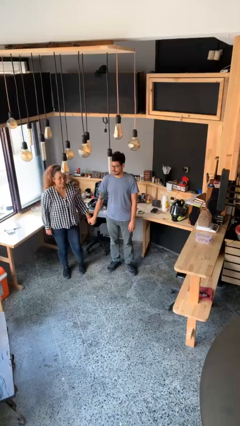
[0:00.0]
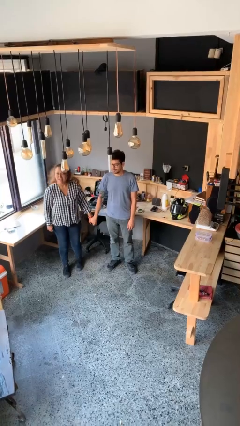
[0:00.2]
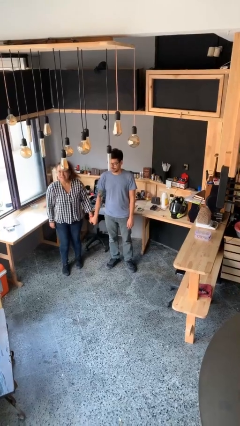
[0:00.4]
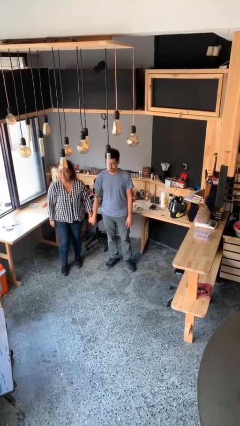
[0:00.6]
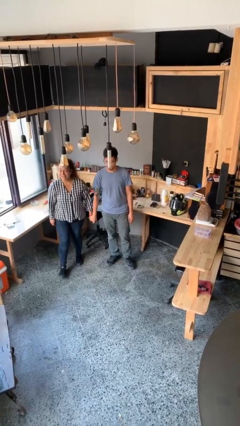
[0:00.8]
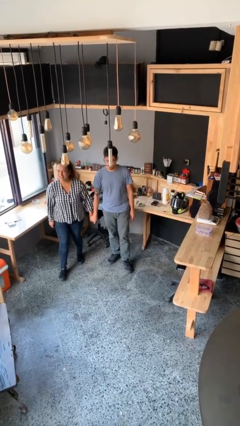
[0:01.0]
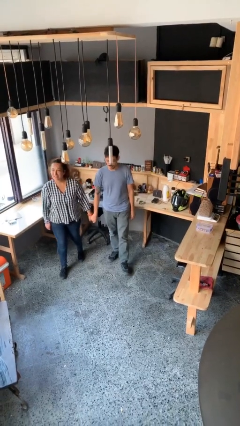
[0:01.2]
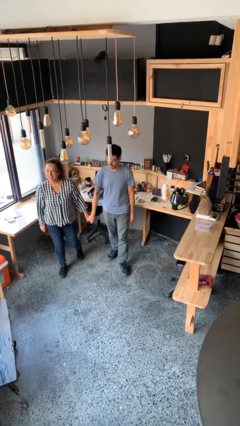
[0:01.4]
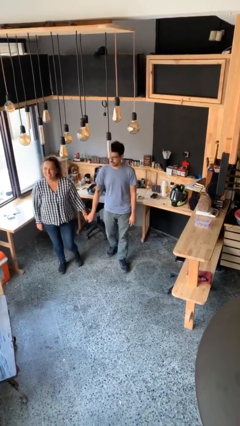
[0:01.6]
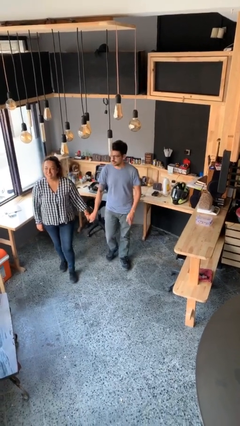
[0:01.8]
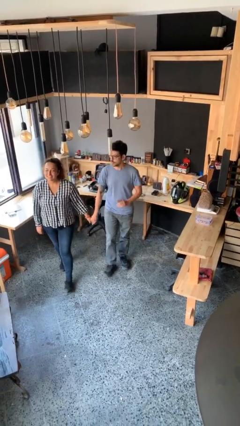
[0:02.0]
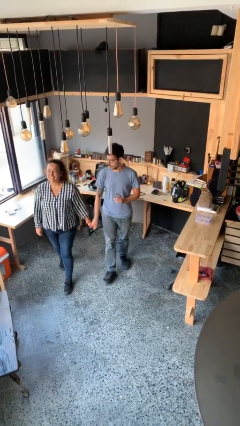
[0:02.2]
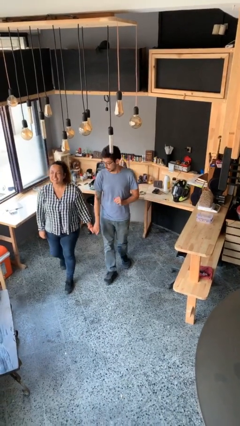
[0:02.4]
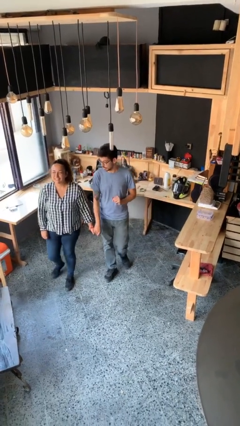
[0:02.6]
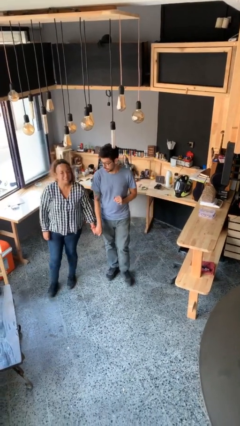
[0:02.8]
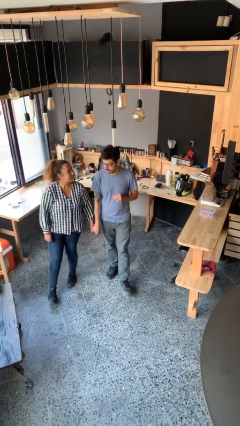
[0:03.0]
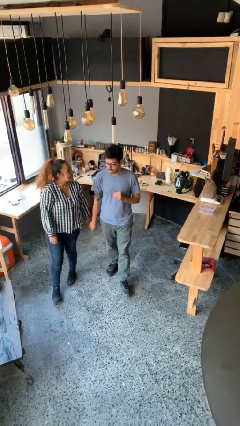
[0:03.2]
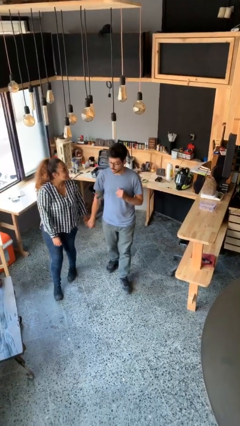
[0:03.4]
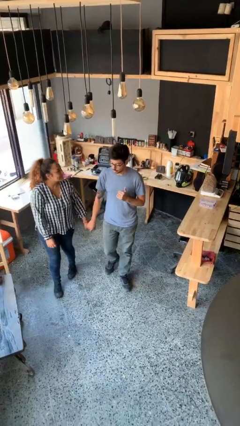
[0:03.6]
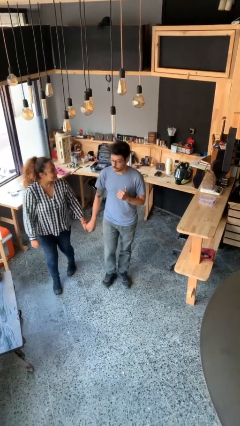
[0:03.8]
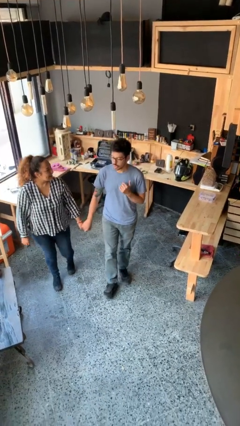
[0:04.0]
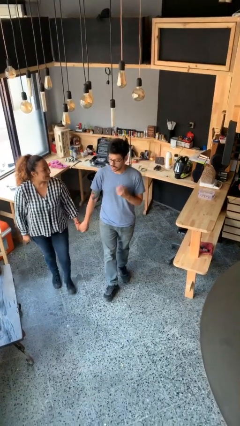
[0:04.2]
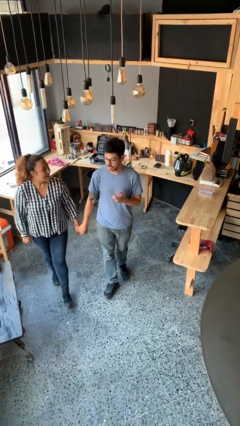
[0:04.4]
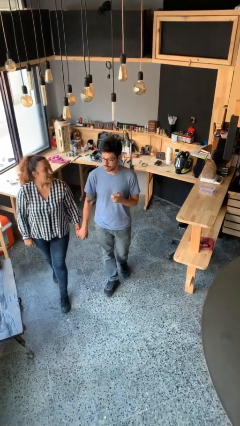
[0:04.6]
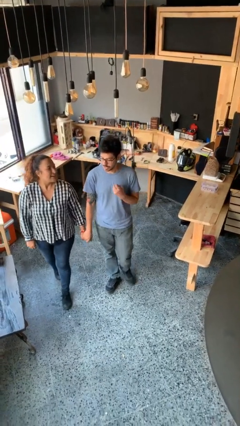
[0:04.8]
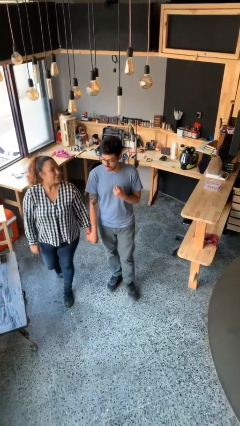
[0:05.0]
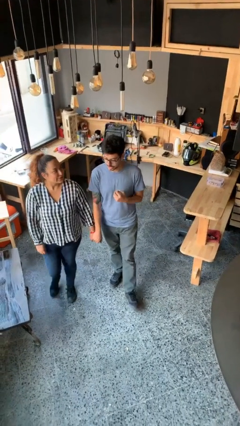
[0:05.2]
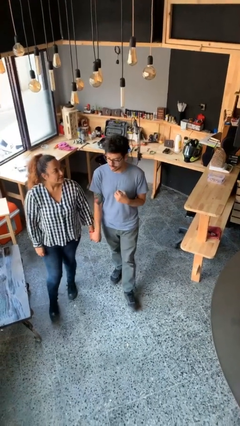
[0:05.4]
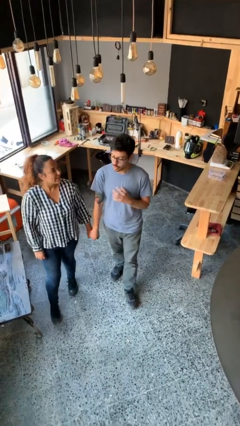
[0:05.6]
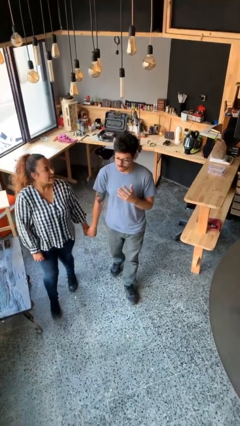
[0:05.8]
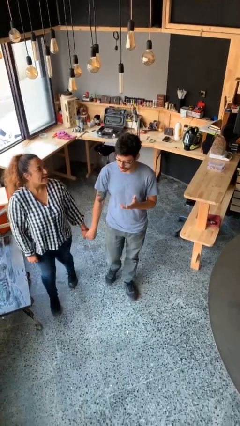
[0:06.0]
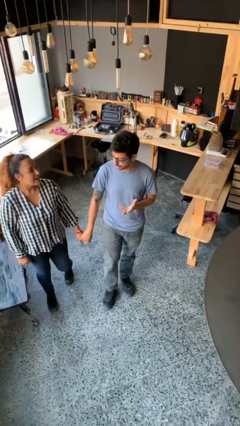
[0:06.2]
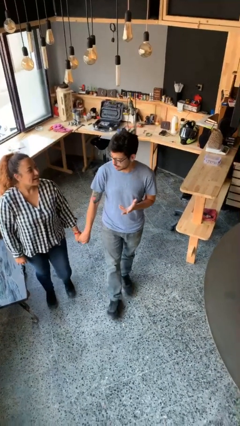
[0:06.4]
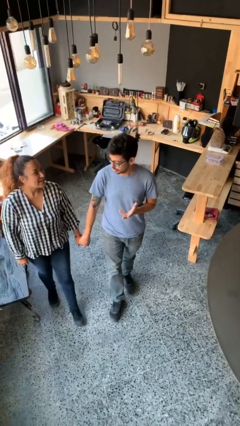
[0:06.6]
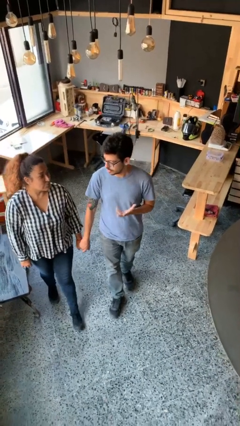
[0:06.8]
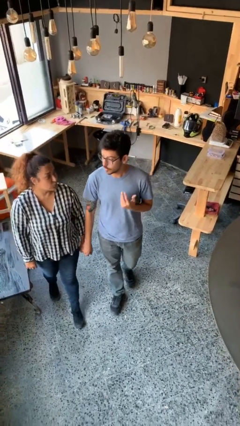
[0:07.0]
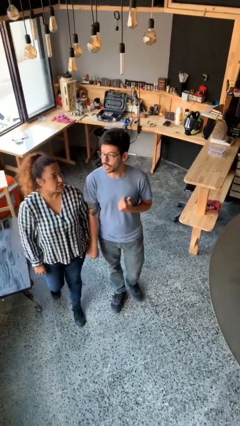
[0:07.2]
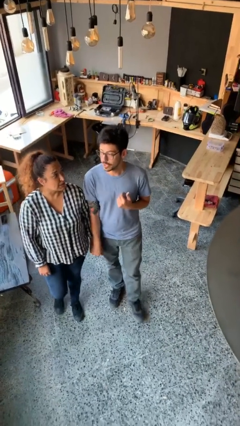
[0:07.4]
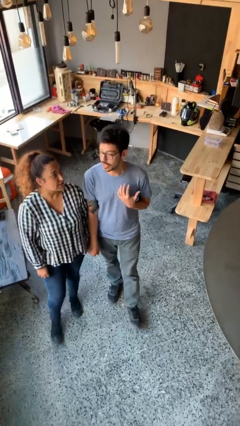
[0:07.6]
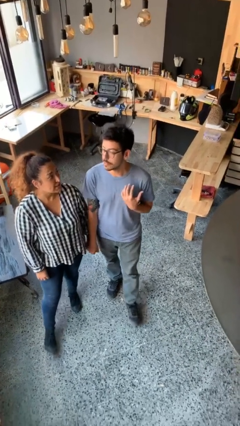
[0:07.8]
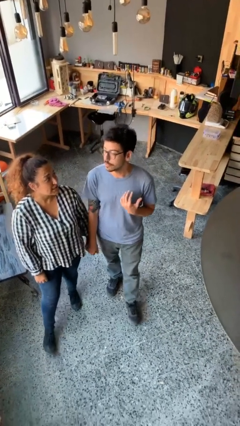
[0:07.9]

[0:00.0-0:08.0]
person holds hand

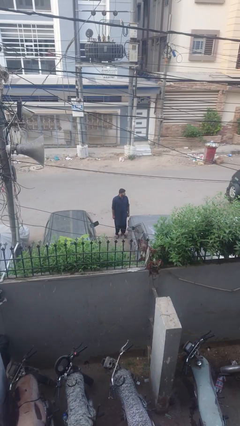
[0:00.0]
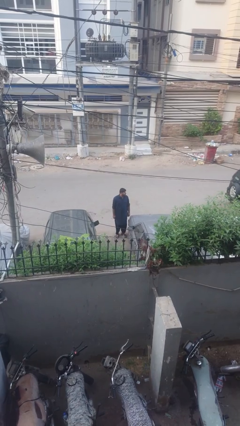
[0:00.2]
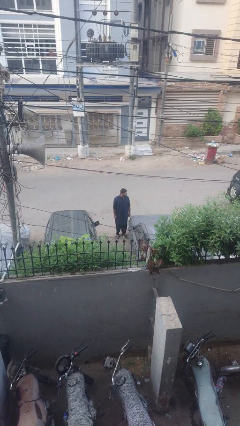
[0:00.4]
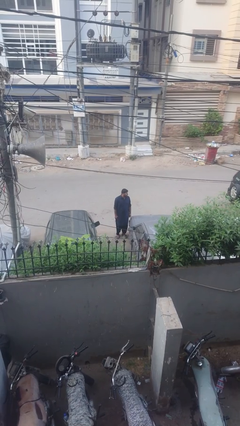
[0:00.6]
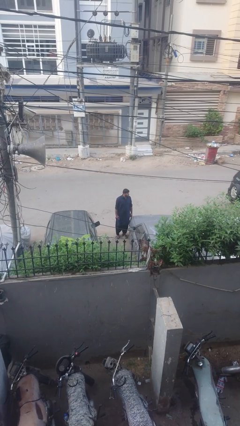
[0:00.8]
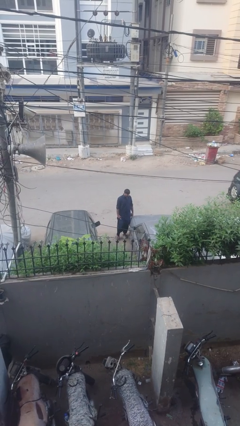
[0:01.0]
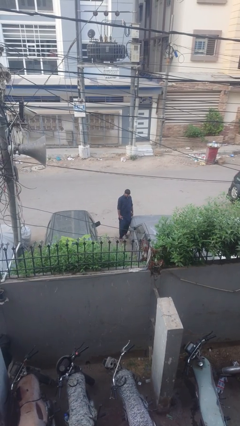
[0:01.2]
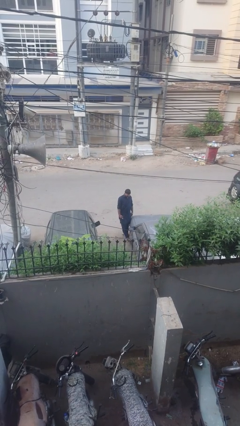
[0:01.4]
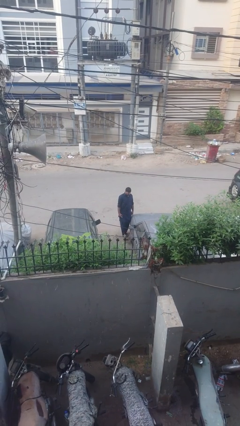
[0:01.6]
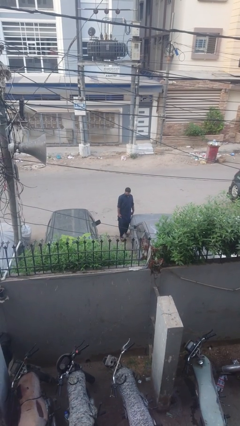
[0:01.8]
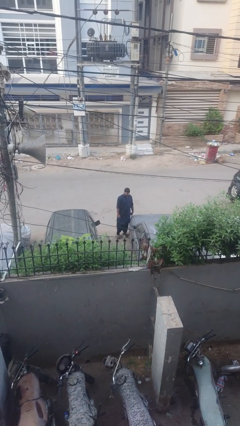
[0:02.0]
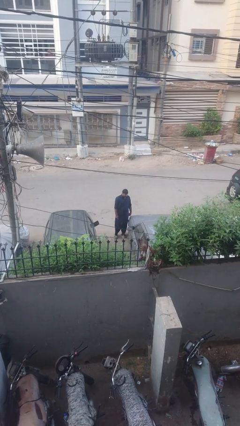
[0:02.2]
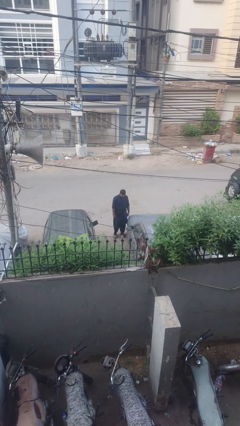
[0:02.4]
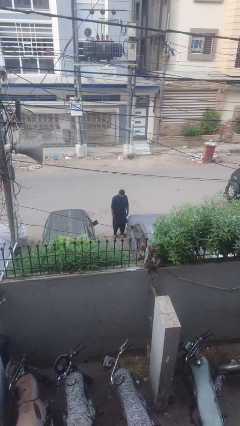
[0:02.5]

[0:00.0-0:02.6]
person kicks car tires

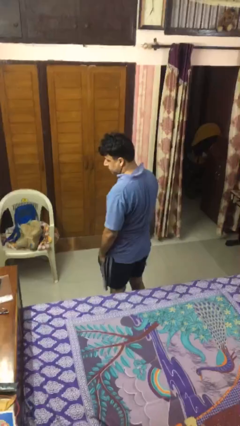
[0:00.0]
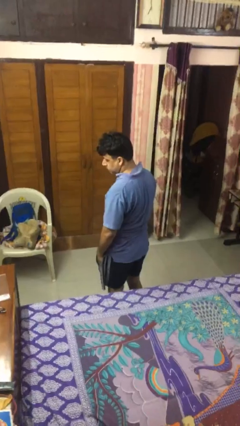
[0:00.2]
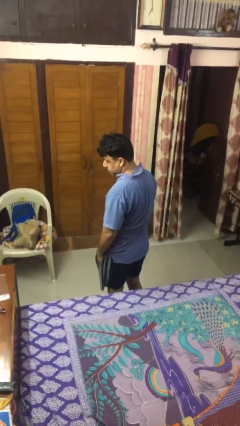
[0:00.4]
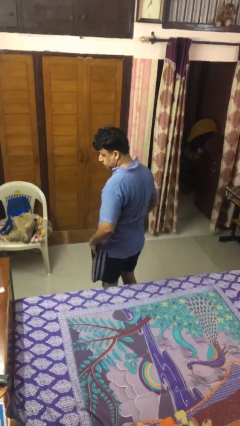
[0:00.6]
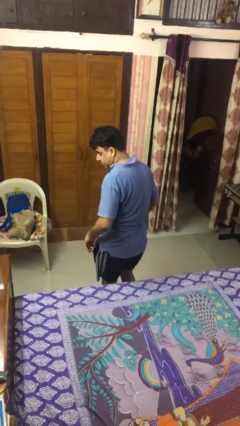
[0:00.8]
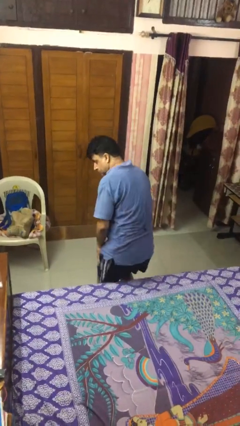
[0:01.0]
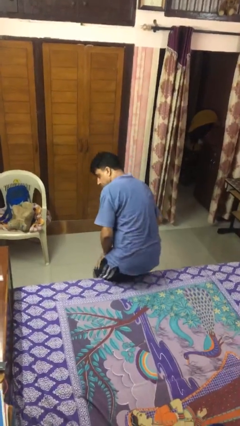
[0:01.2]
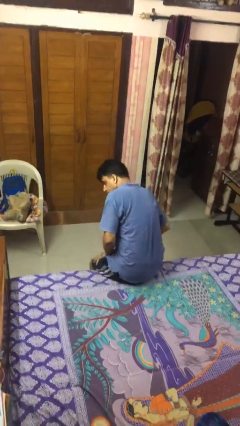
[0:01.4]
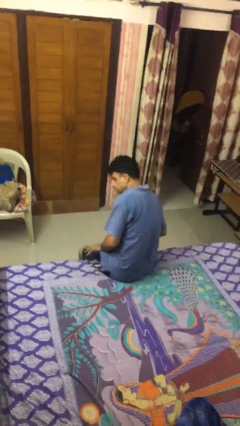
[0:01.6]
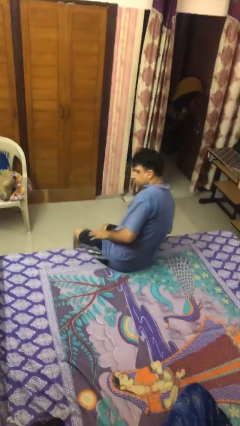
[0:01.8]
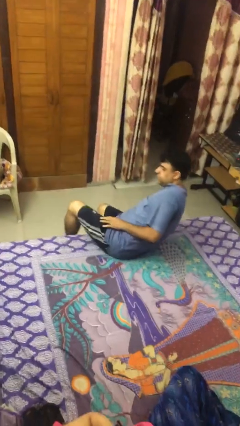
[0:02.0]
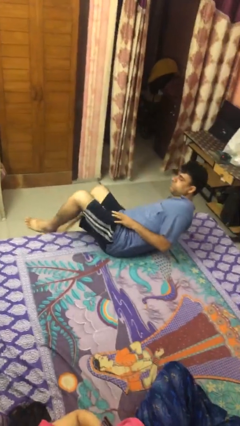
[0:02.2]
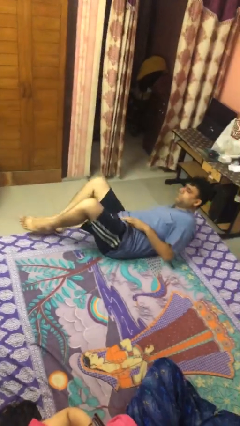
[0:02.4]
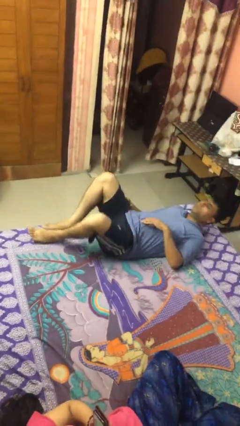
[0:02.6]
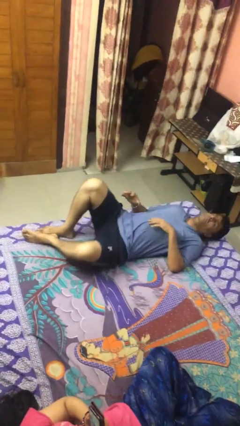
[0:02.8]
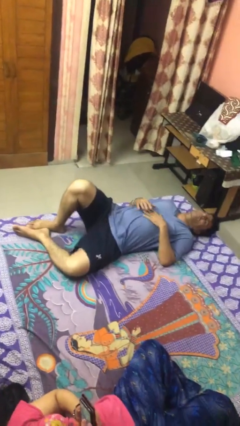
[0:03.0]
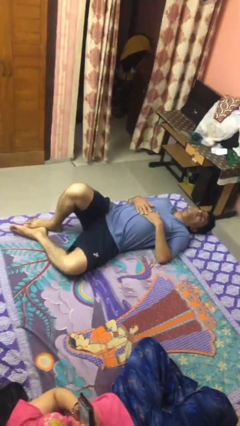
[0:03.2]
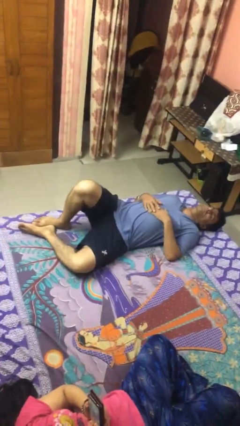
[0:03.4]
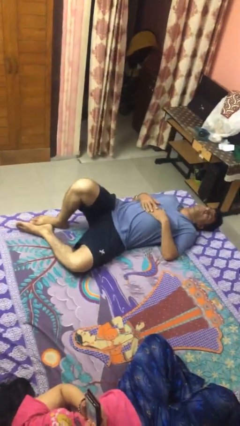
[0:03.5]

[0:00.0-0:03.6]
person lies down on bed

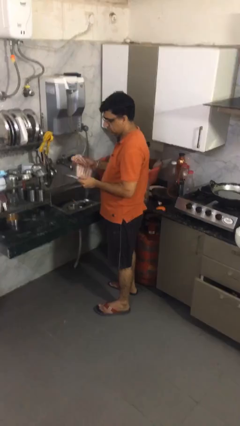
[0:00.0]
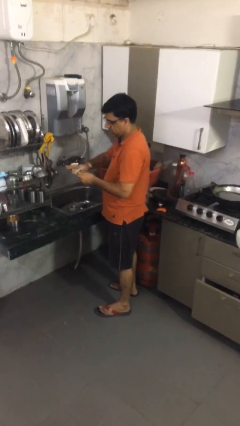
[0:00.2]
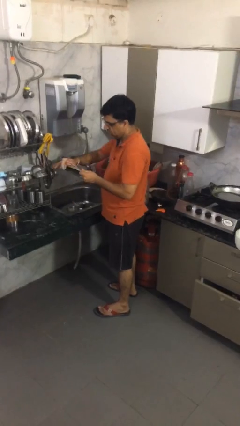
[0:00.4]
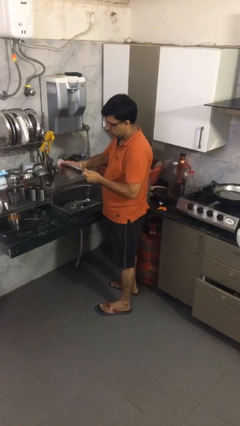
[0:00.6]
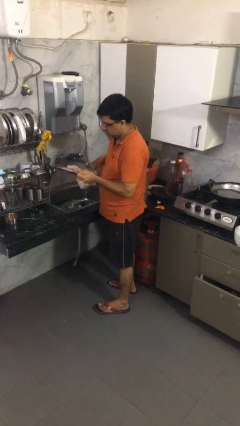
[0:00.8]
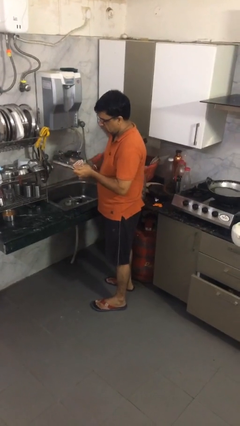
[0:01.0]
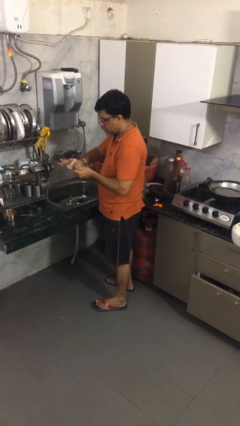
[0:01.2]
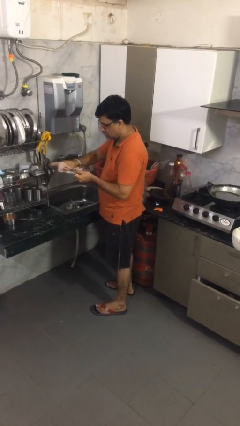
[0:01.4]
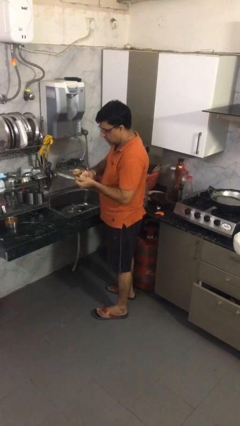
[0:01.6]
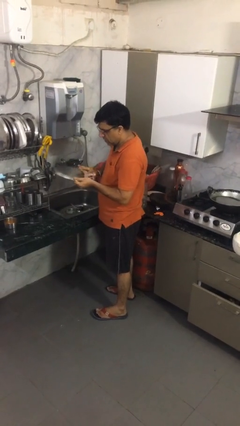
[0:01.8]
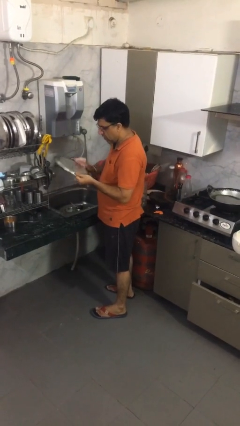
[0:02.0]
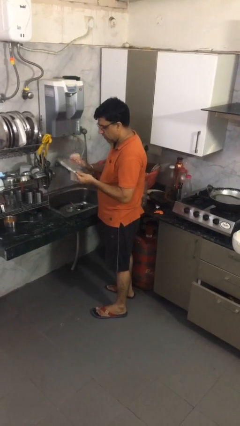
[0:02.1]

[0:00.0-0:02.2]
person dries dish

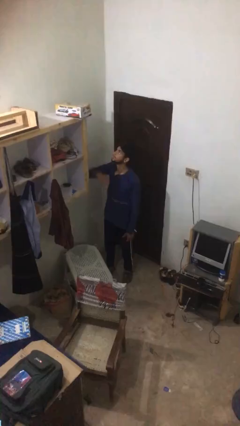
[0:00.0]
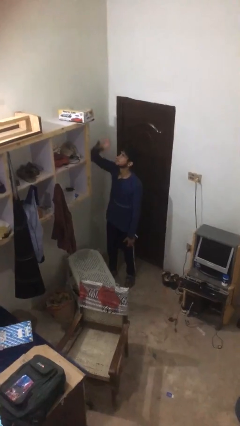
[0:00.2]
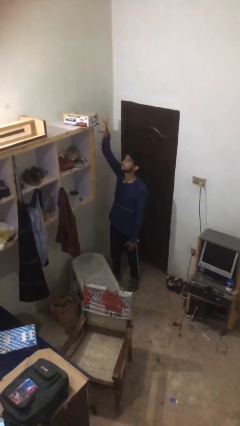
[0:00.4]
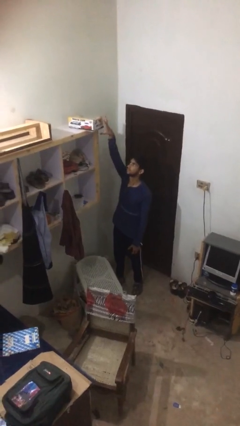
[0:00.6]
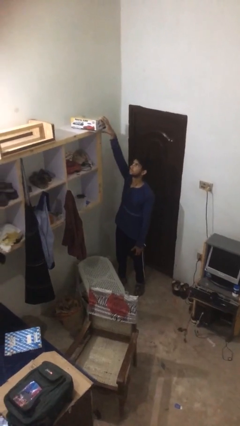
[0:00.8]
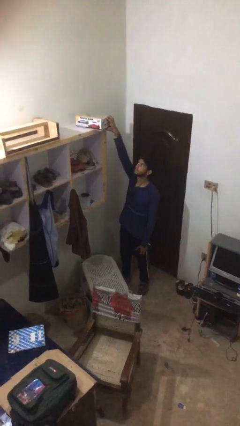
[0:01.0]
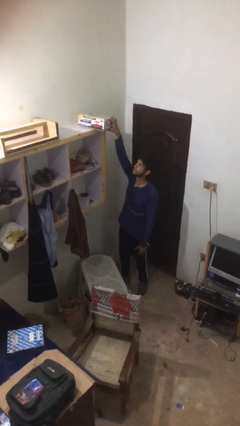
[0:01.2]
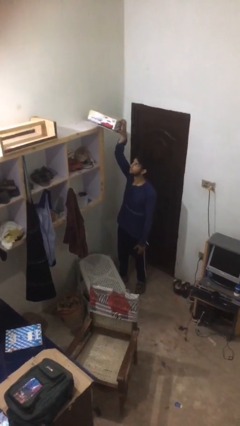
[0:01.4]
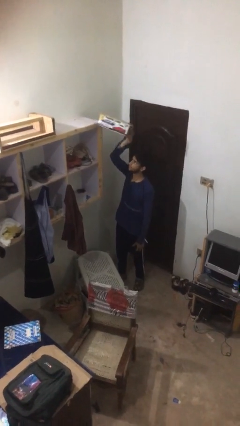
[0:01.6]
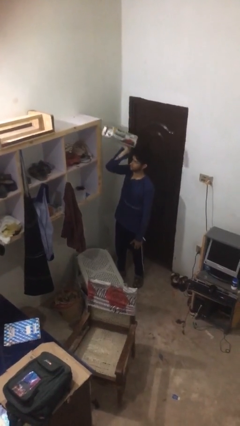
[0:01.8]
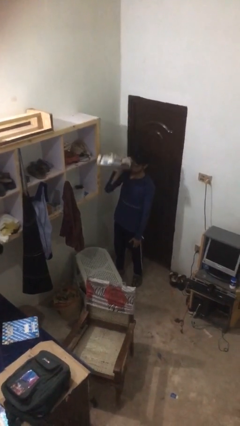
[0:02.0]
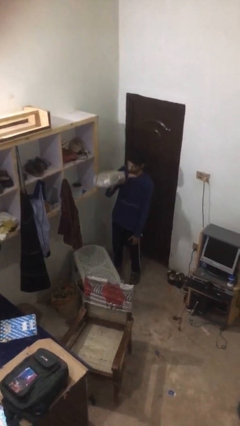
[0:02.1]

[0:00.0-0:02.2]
person picks up object from shelf
